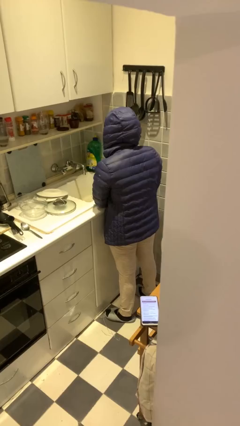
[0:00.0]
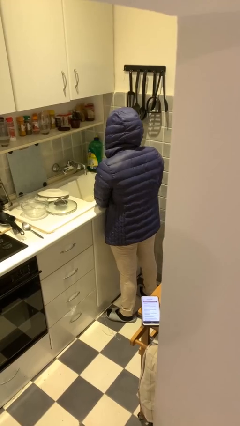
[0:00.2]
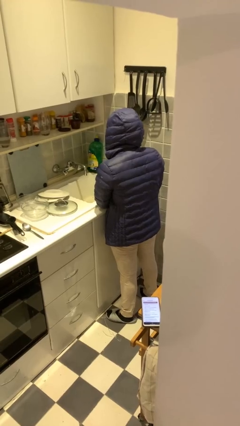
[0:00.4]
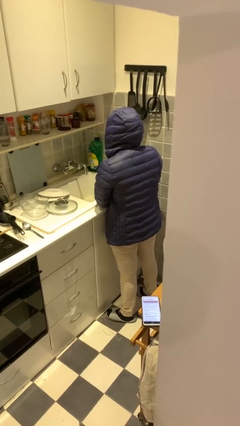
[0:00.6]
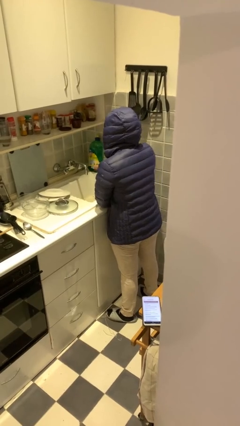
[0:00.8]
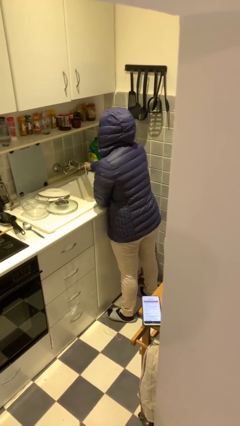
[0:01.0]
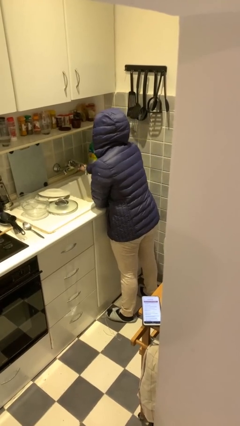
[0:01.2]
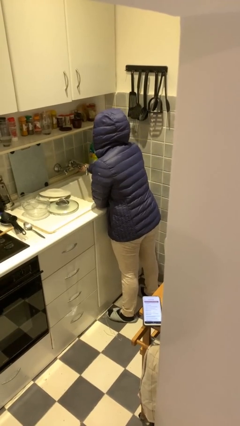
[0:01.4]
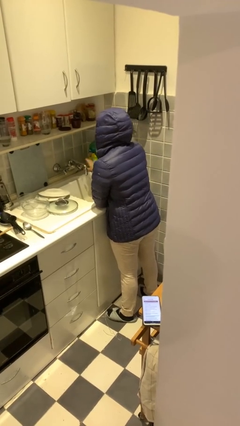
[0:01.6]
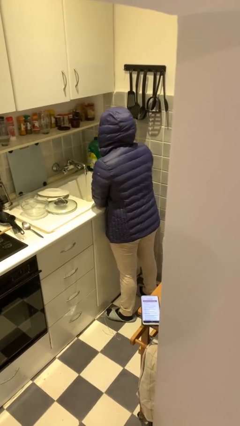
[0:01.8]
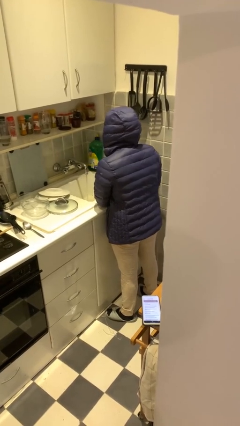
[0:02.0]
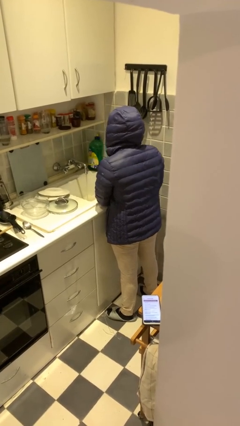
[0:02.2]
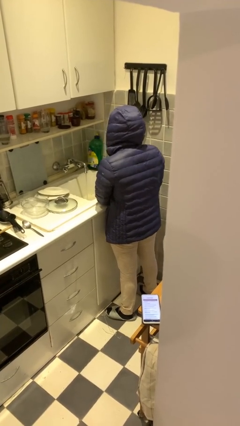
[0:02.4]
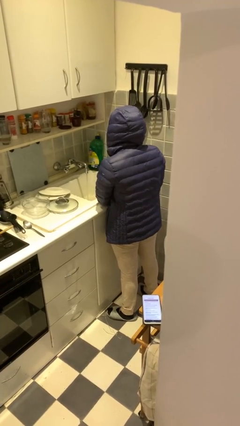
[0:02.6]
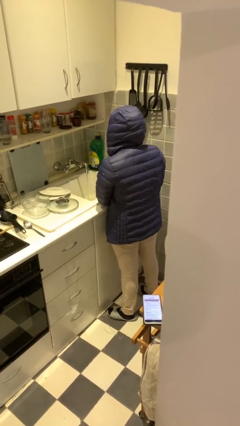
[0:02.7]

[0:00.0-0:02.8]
person turns on faucet

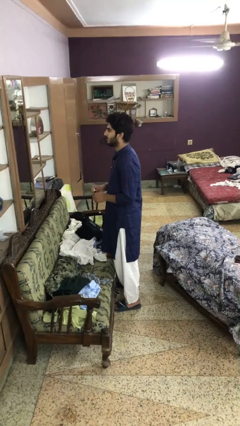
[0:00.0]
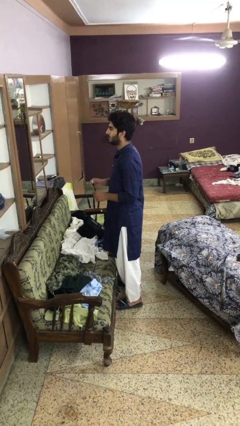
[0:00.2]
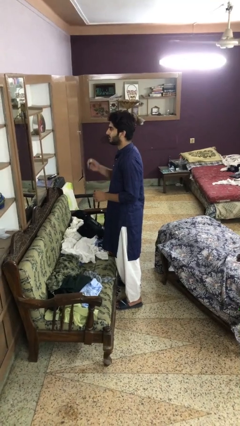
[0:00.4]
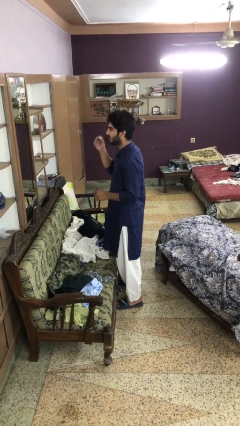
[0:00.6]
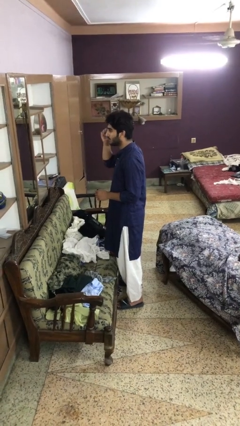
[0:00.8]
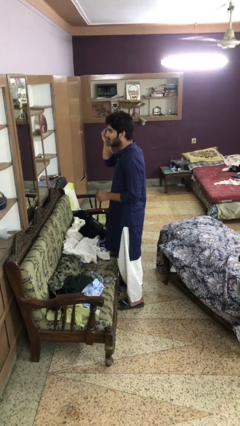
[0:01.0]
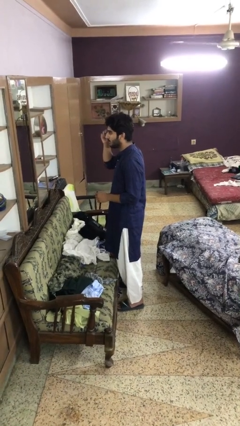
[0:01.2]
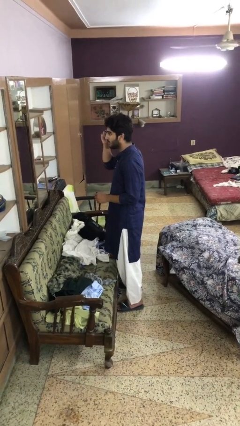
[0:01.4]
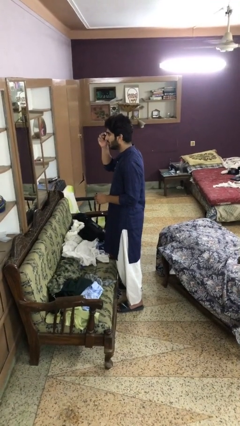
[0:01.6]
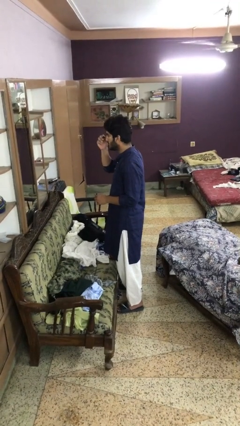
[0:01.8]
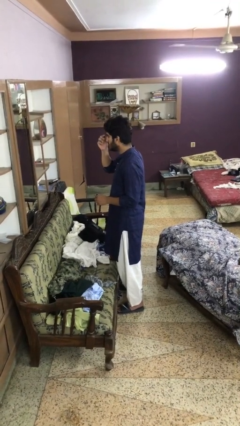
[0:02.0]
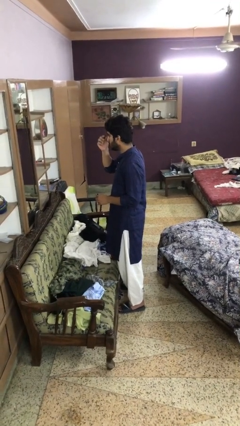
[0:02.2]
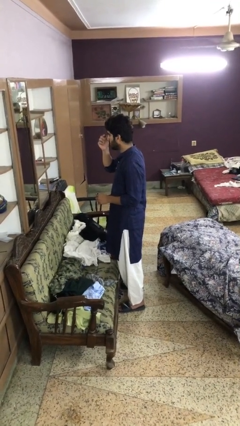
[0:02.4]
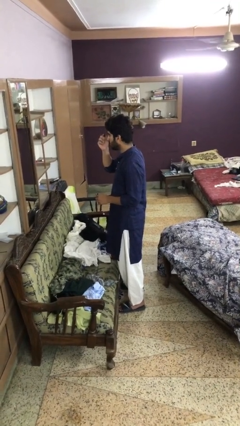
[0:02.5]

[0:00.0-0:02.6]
person applies eye makeup

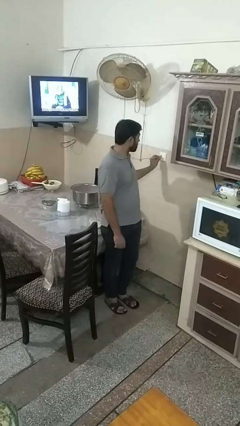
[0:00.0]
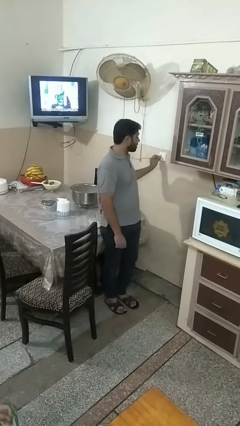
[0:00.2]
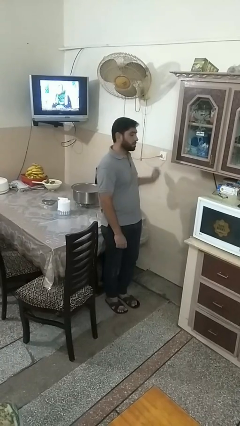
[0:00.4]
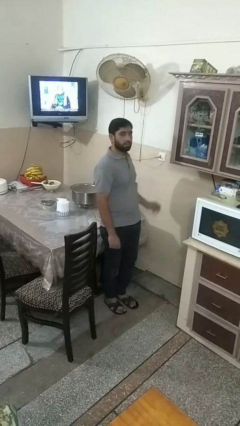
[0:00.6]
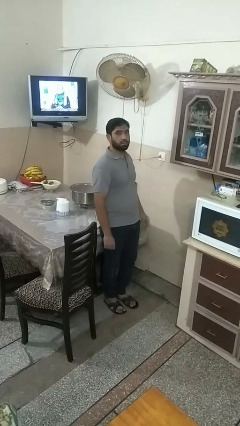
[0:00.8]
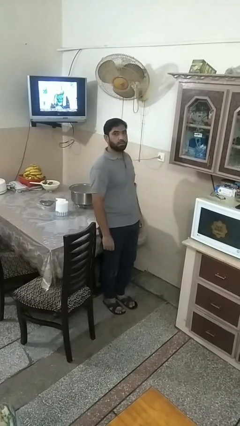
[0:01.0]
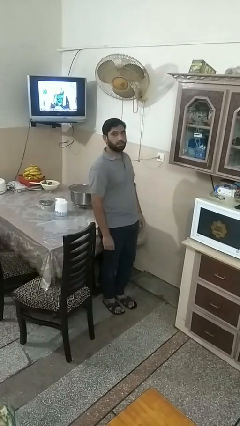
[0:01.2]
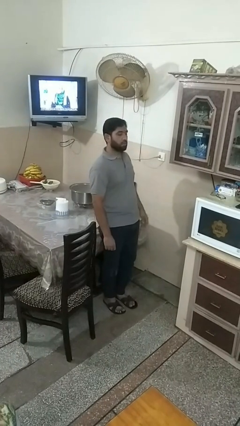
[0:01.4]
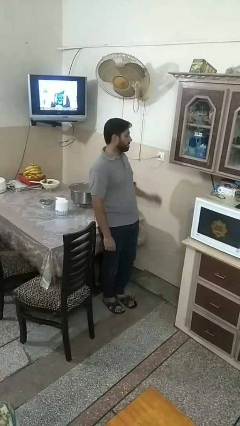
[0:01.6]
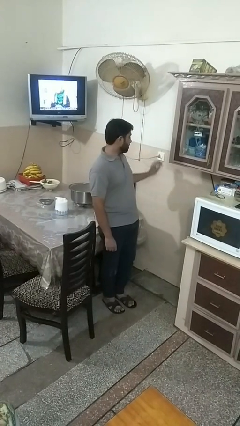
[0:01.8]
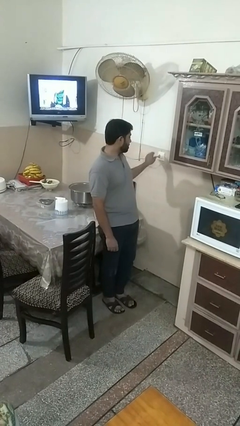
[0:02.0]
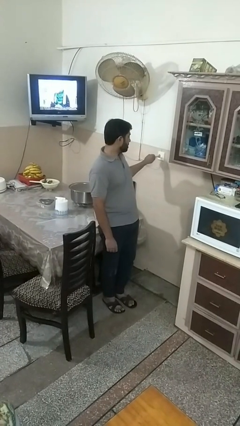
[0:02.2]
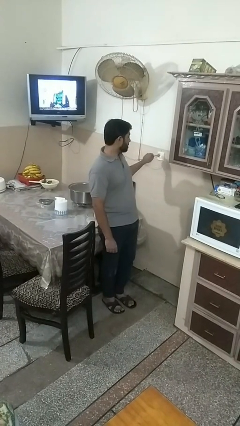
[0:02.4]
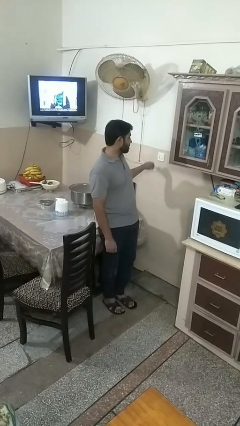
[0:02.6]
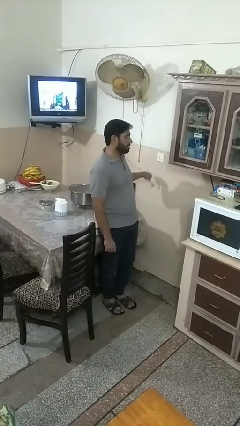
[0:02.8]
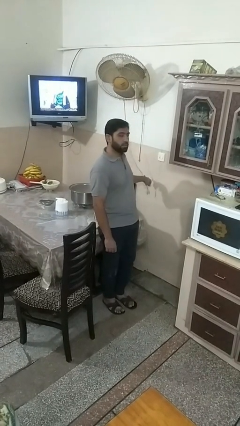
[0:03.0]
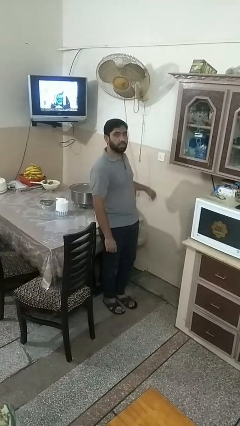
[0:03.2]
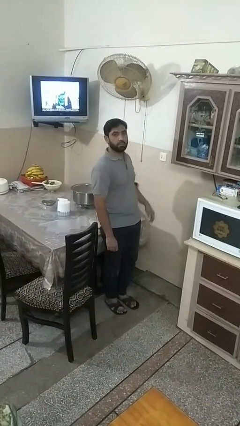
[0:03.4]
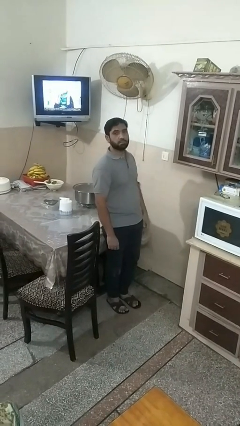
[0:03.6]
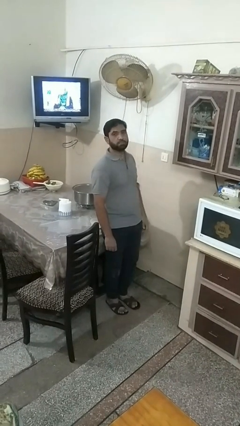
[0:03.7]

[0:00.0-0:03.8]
person unplugs from electrical socket

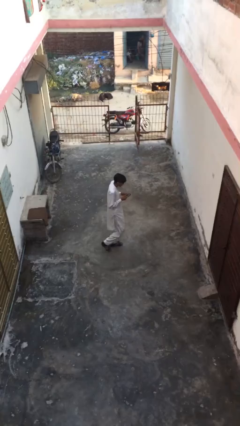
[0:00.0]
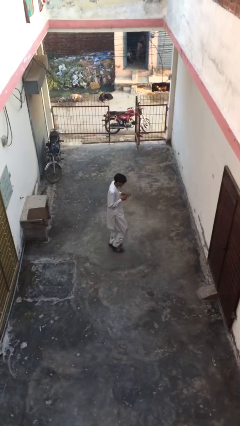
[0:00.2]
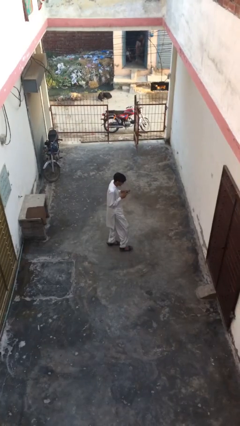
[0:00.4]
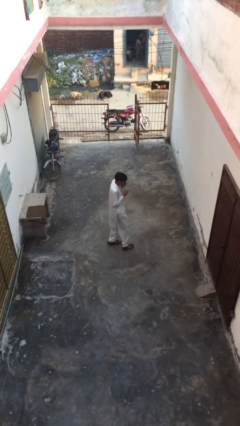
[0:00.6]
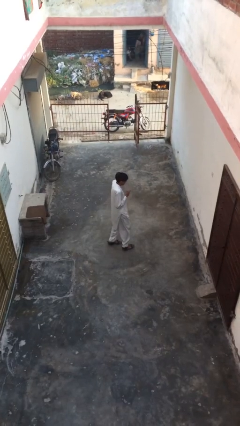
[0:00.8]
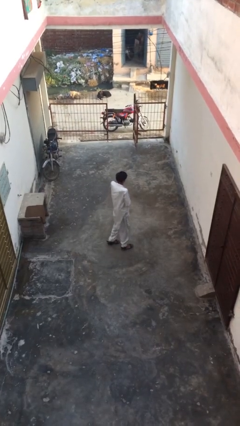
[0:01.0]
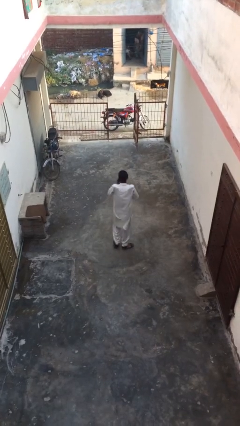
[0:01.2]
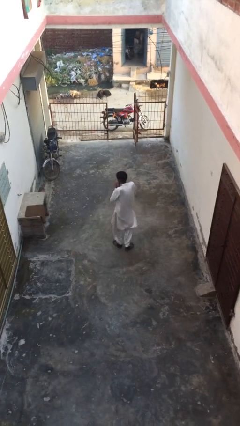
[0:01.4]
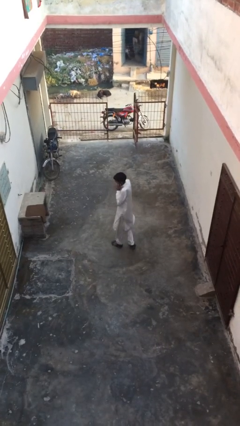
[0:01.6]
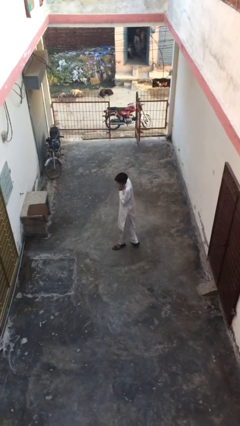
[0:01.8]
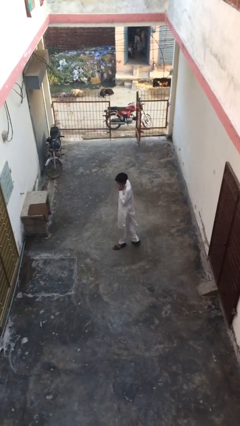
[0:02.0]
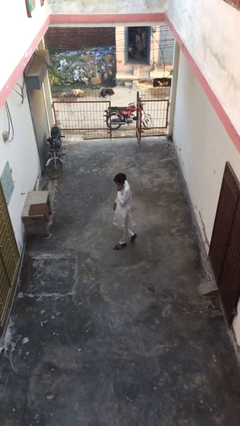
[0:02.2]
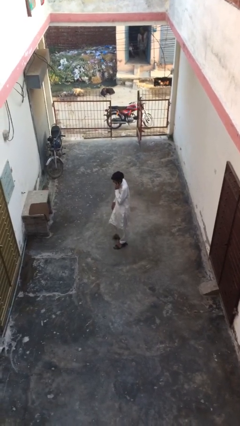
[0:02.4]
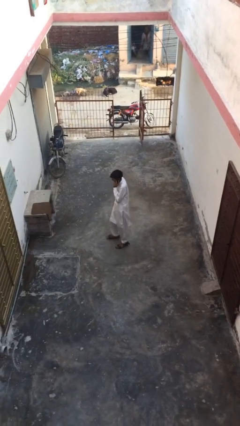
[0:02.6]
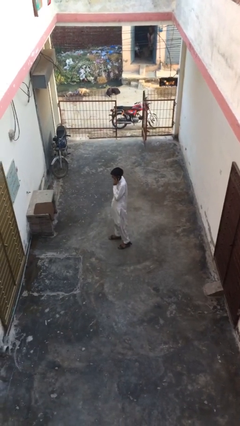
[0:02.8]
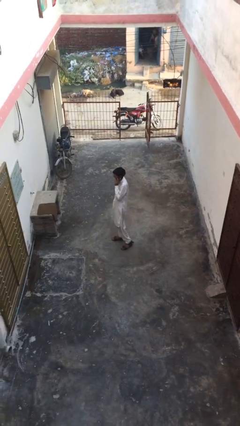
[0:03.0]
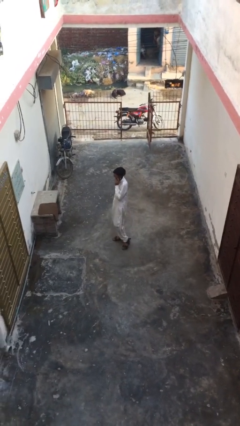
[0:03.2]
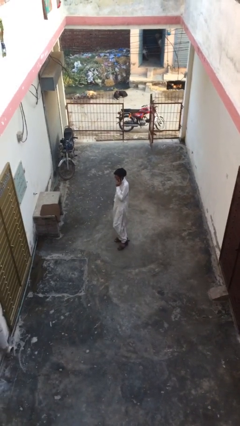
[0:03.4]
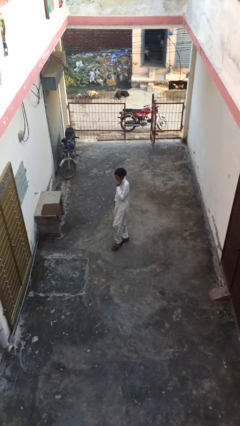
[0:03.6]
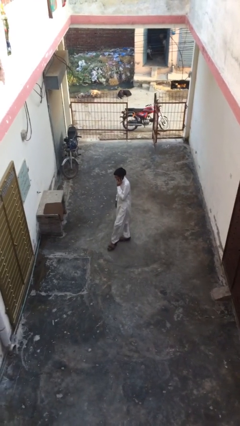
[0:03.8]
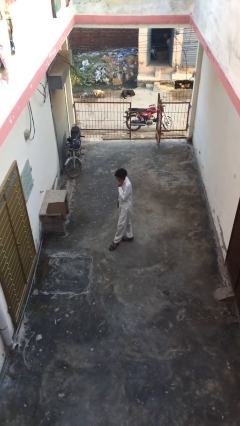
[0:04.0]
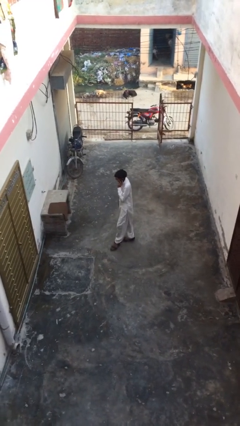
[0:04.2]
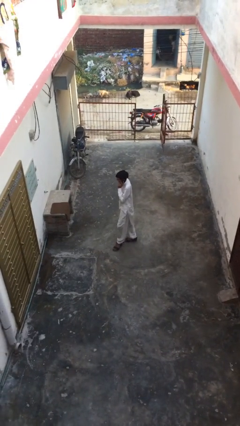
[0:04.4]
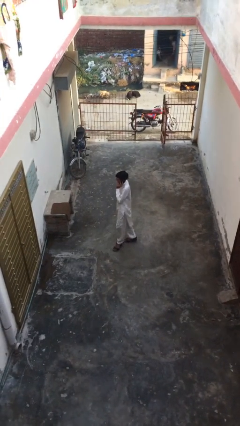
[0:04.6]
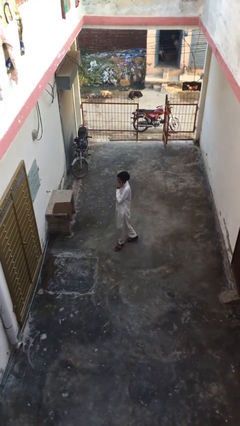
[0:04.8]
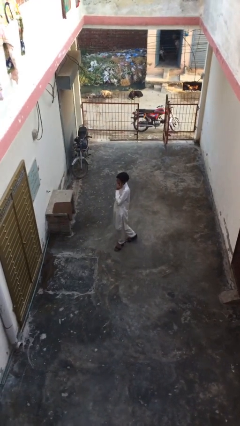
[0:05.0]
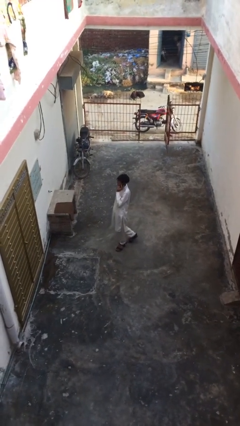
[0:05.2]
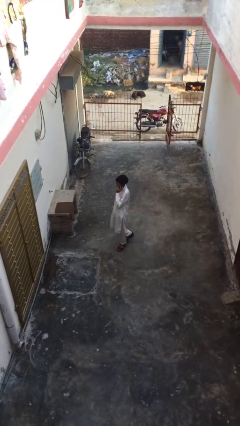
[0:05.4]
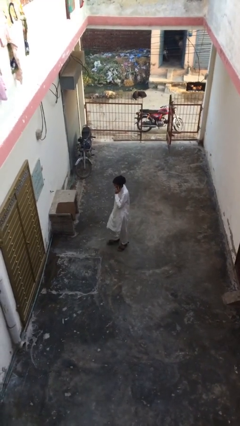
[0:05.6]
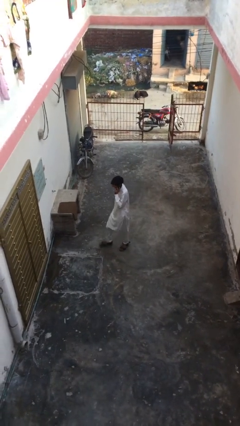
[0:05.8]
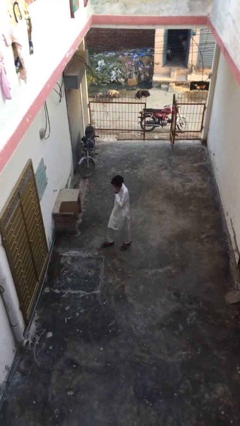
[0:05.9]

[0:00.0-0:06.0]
person talks on phone

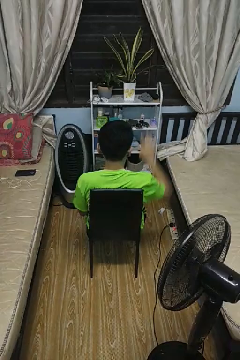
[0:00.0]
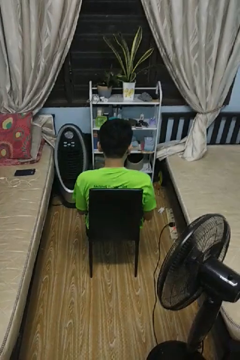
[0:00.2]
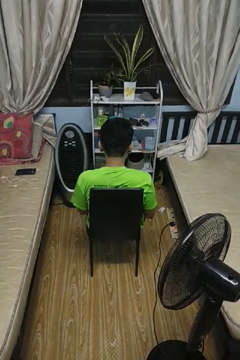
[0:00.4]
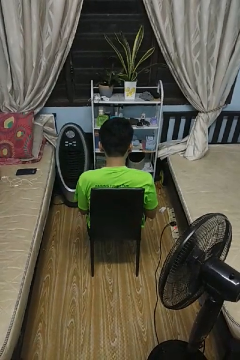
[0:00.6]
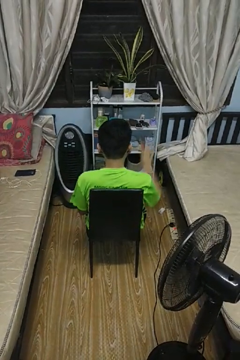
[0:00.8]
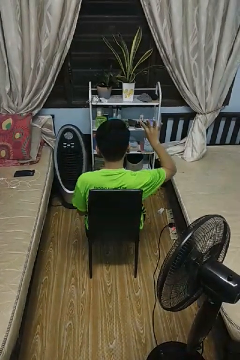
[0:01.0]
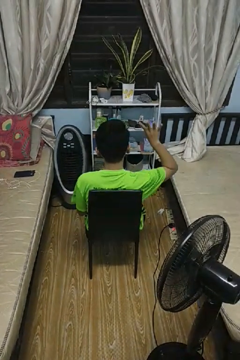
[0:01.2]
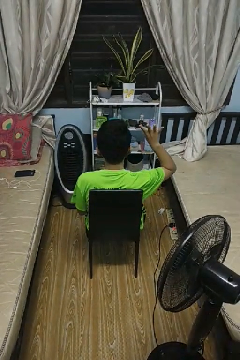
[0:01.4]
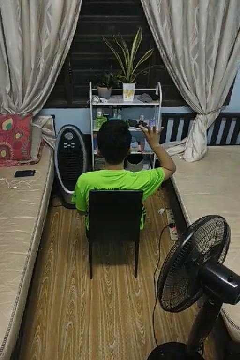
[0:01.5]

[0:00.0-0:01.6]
person gestures number four

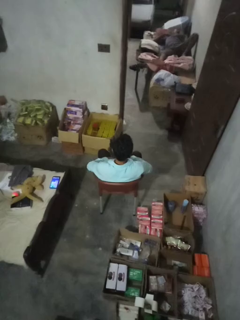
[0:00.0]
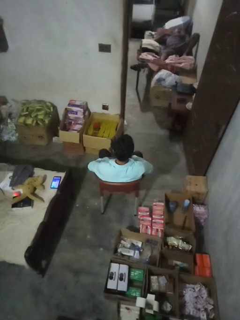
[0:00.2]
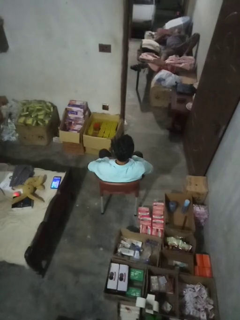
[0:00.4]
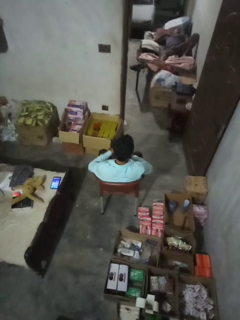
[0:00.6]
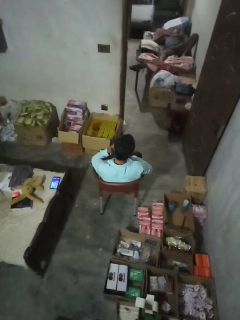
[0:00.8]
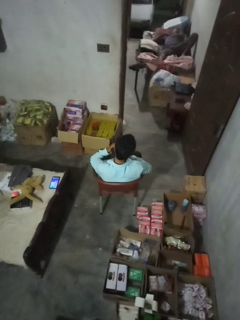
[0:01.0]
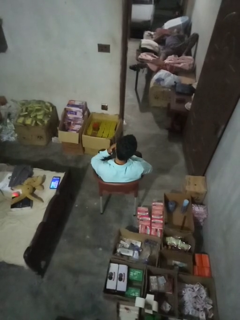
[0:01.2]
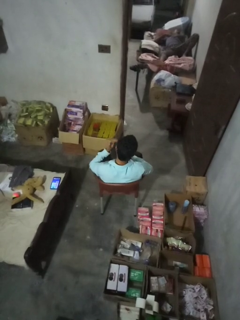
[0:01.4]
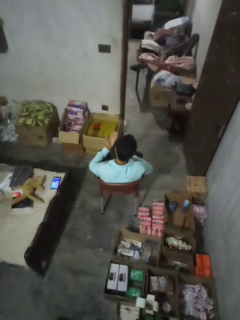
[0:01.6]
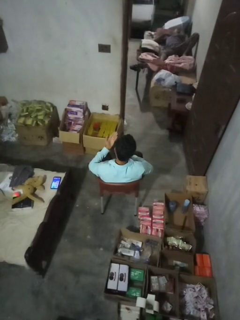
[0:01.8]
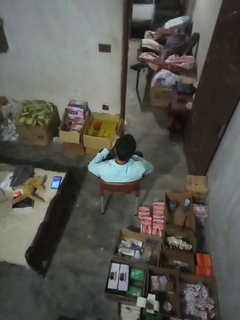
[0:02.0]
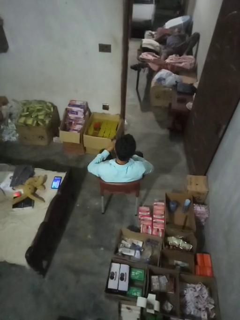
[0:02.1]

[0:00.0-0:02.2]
person swats bug
